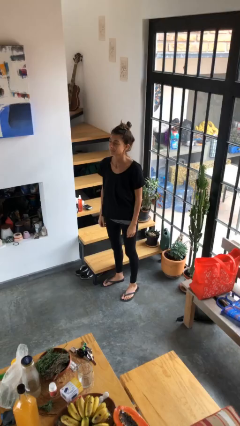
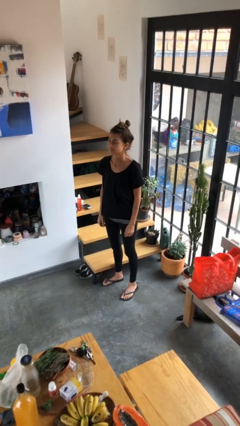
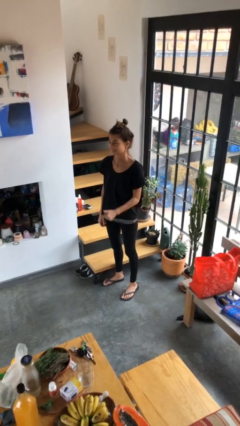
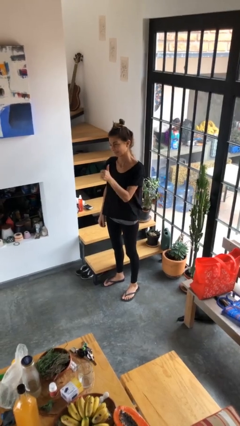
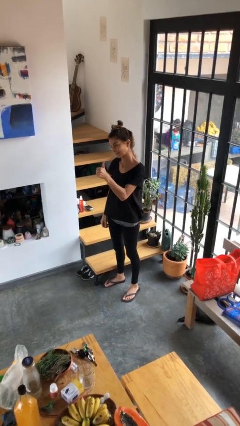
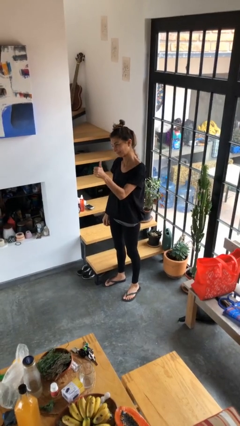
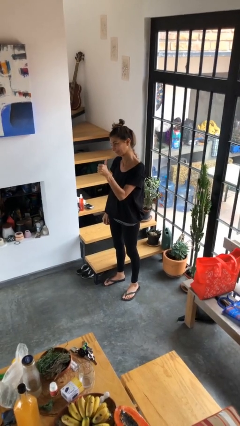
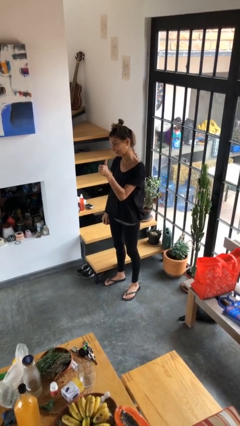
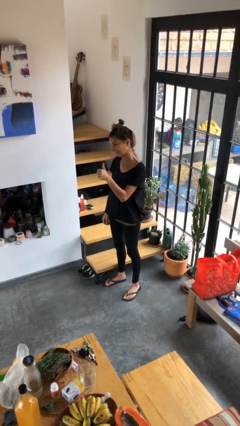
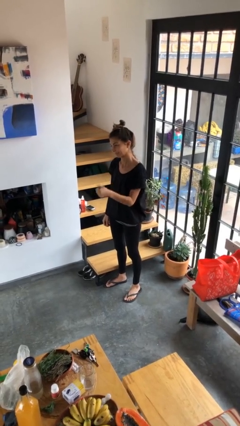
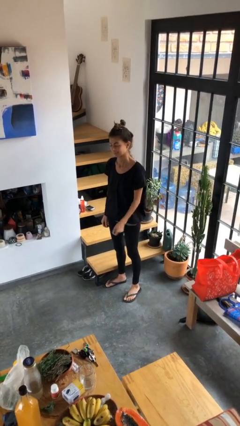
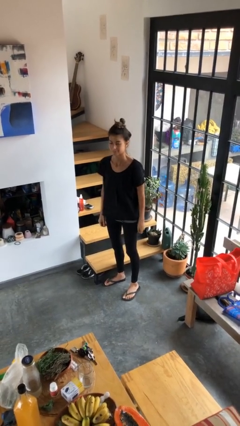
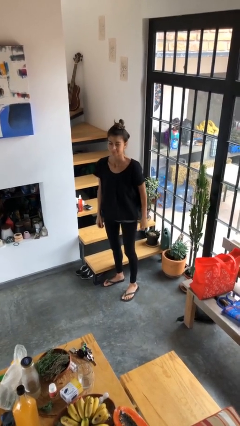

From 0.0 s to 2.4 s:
person gestures thumbs up

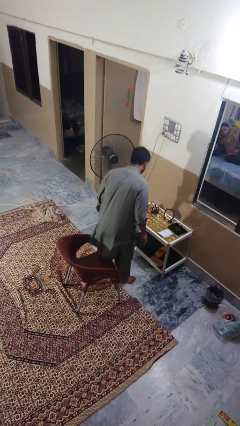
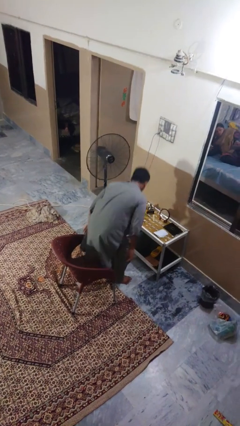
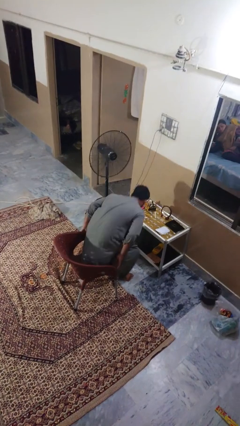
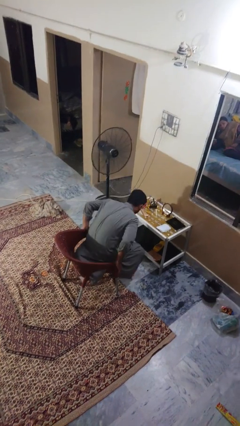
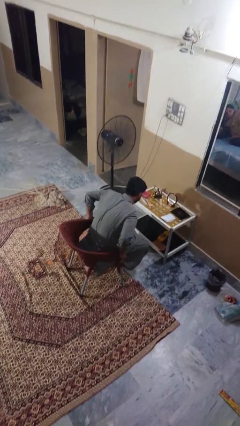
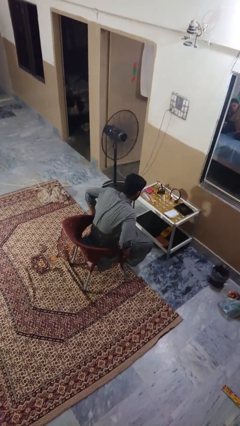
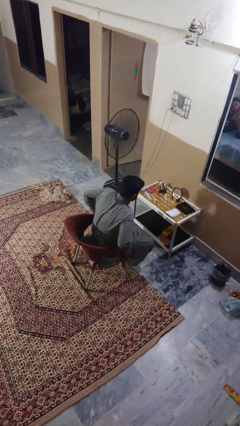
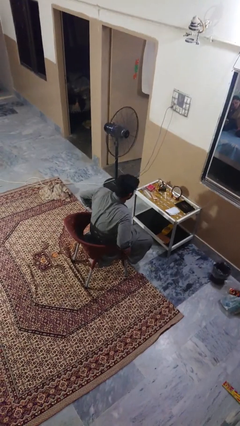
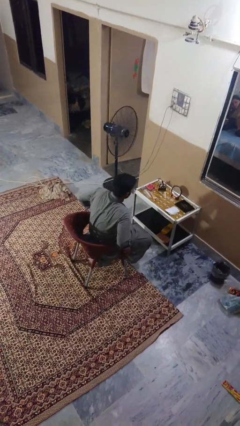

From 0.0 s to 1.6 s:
person sits down

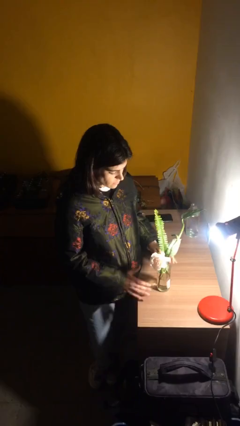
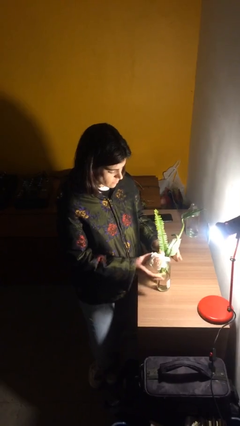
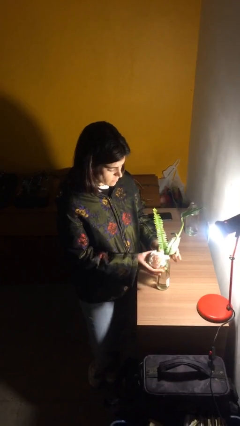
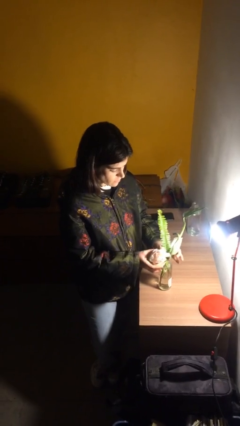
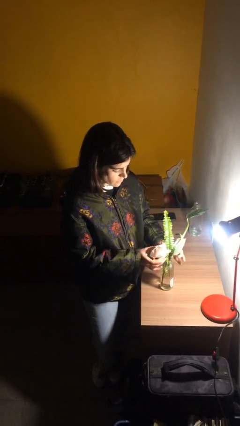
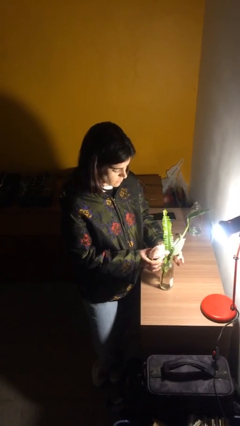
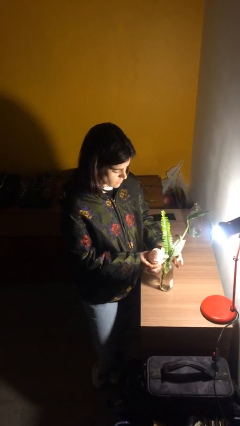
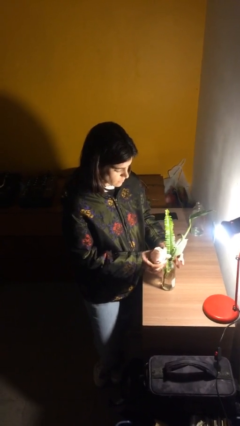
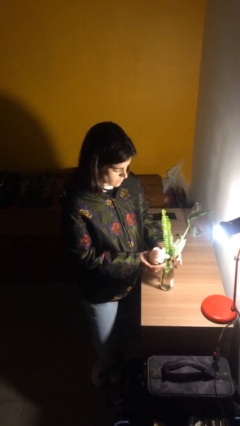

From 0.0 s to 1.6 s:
person arranges flowers in vase

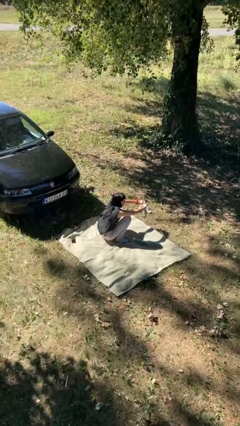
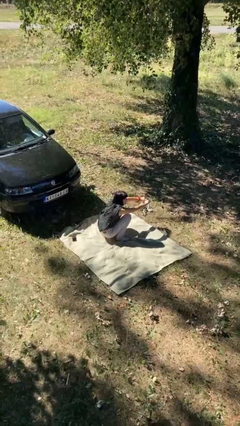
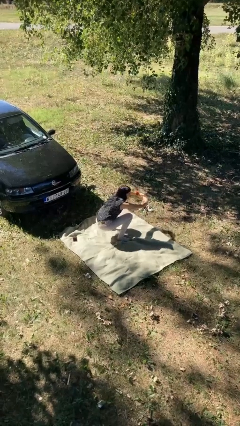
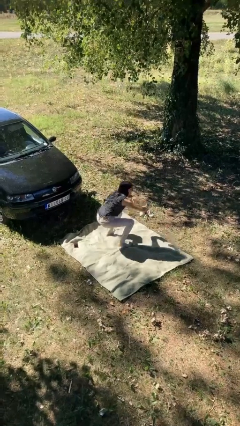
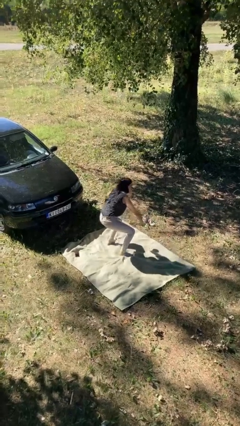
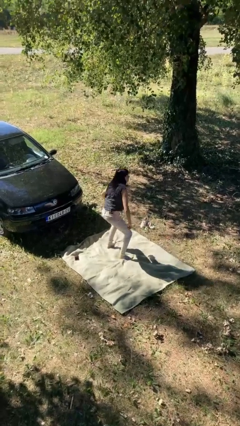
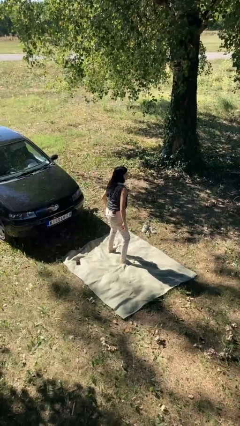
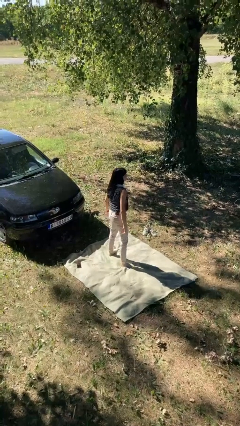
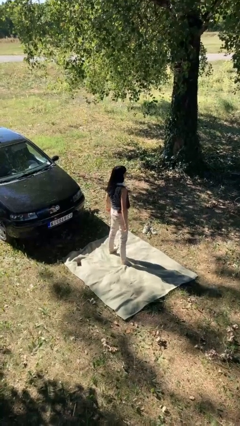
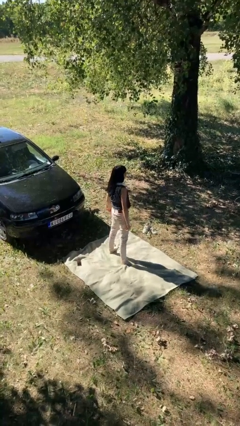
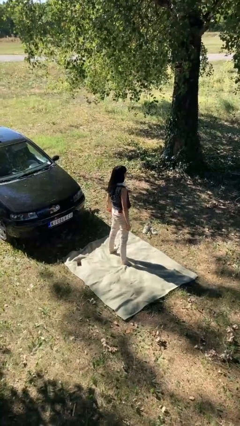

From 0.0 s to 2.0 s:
person stands up

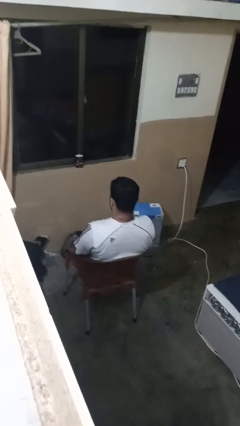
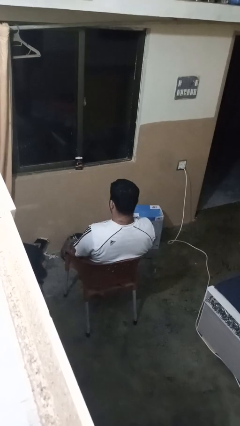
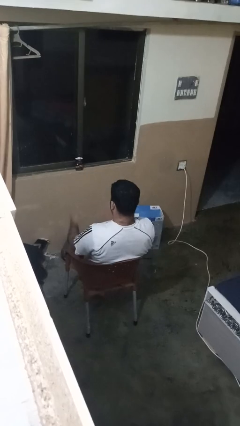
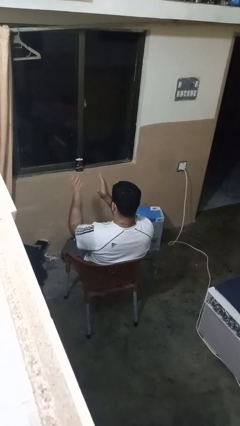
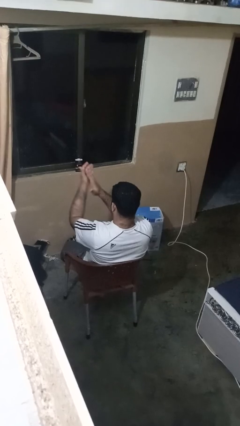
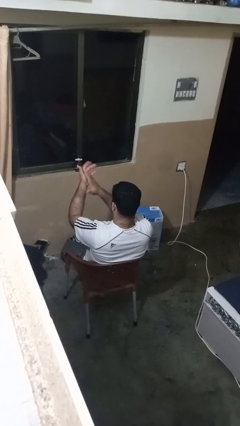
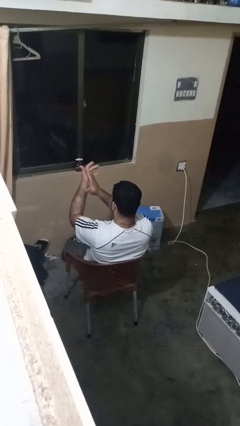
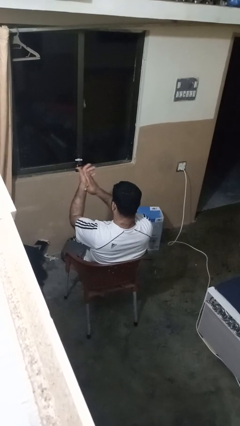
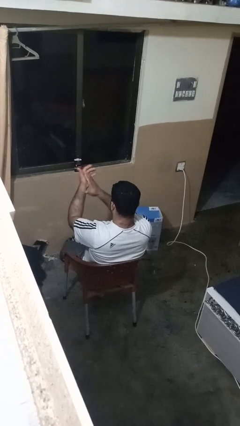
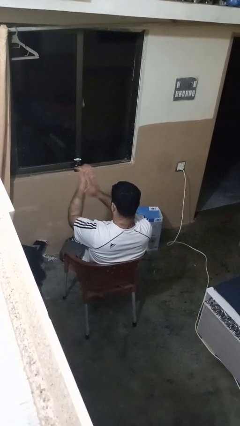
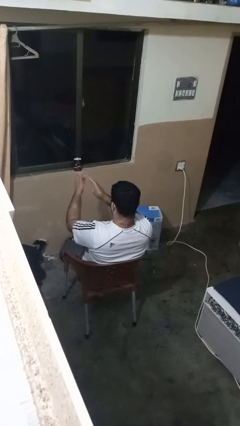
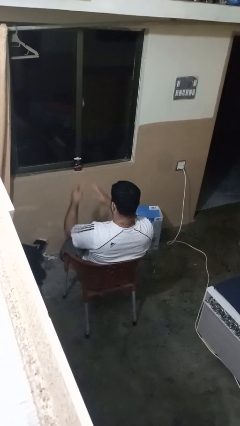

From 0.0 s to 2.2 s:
person claps hands

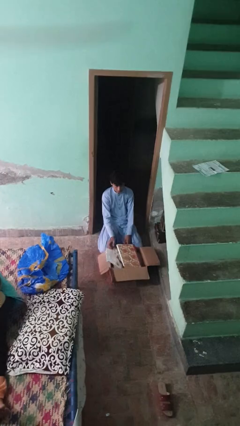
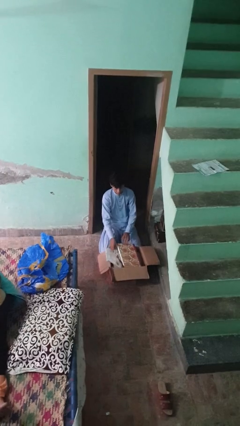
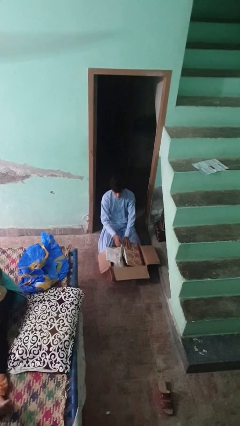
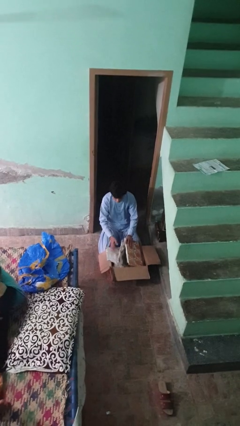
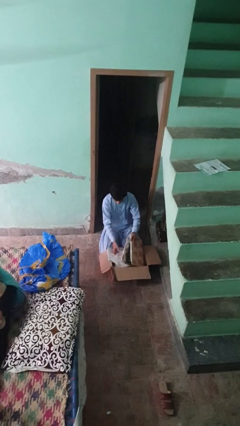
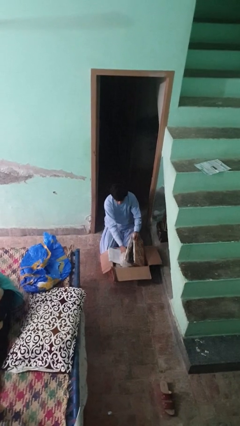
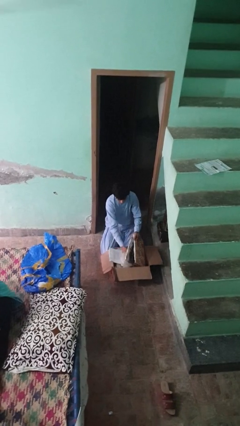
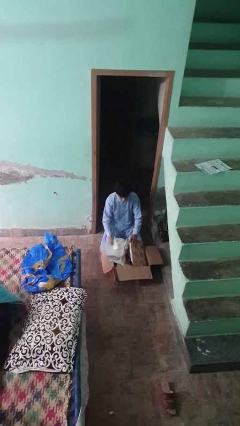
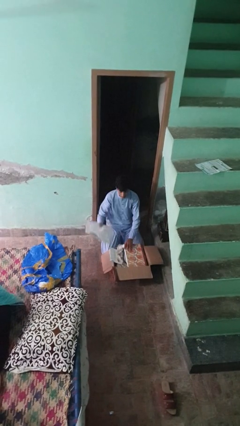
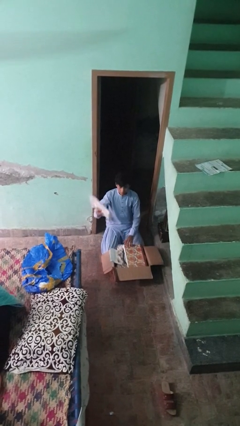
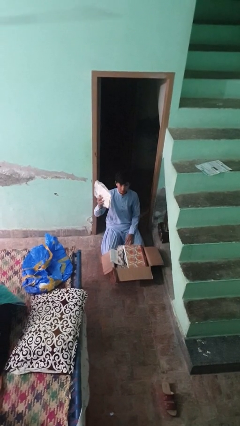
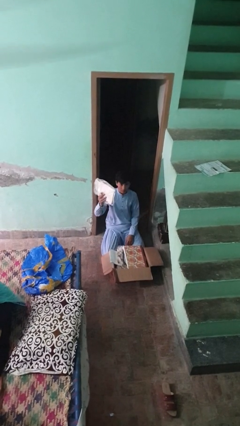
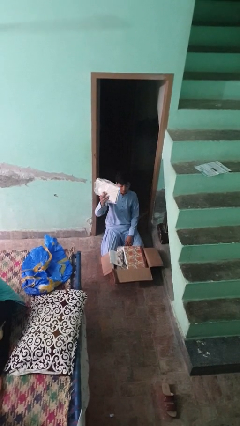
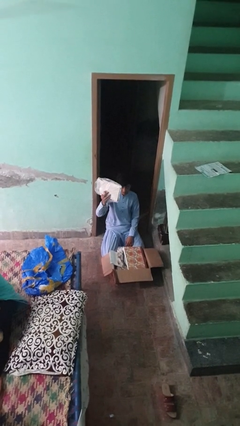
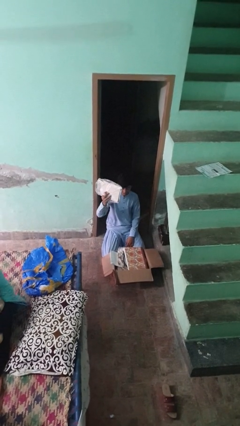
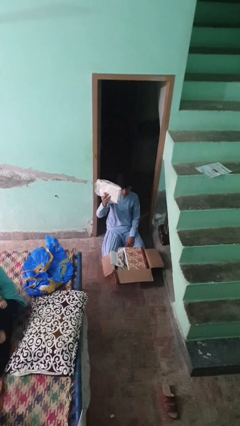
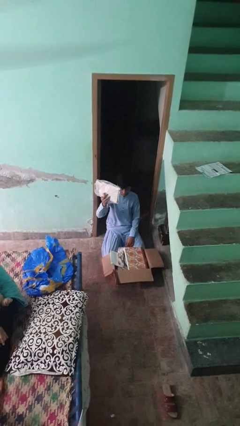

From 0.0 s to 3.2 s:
person takes object from box

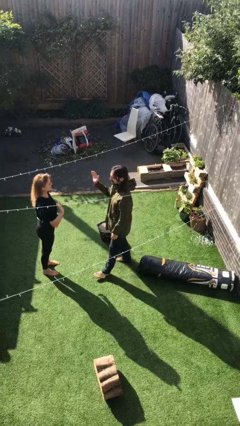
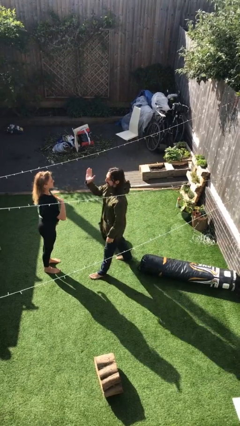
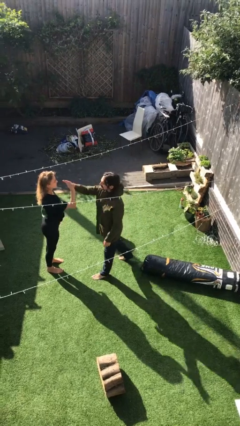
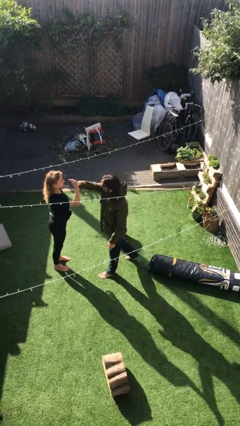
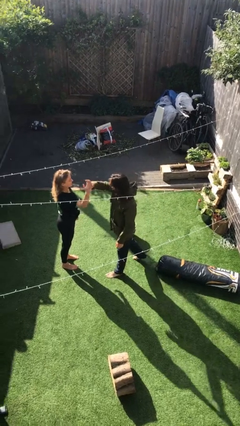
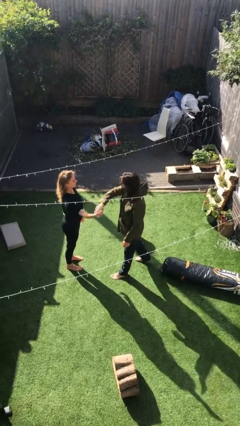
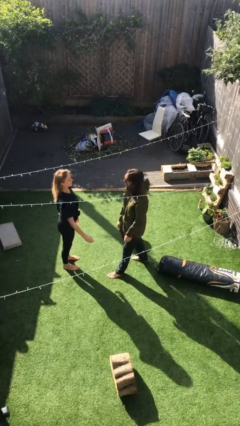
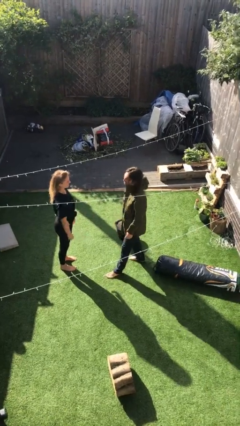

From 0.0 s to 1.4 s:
person highfives hand

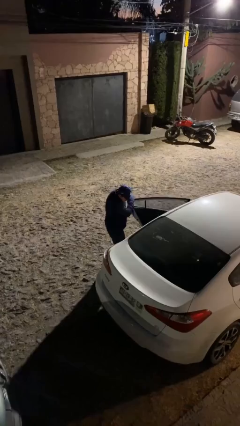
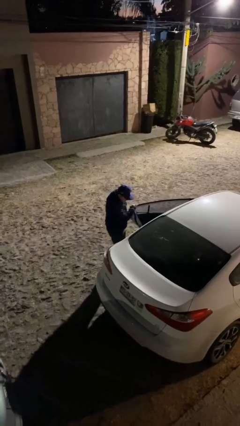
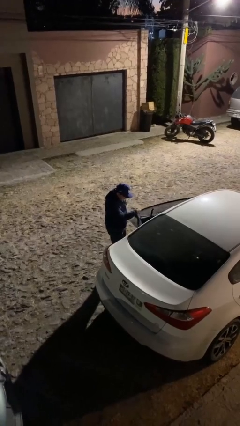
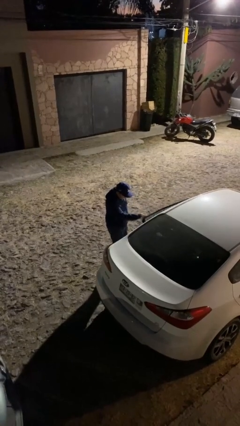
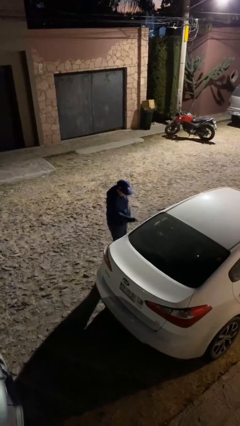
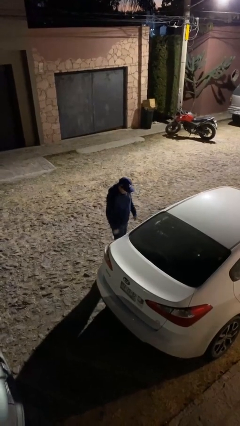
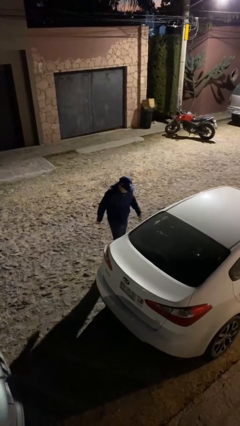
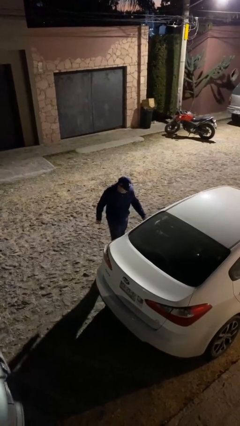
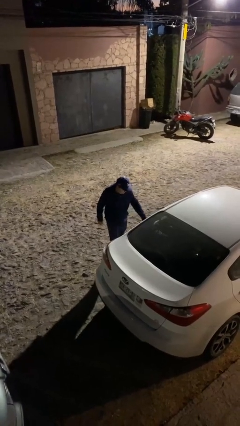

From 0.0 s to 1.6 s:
person closes car door

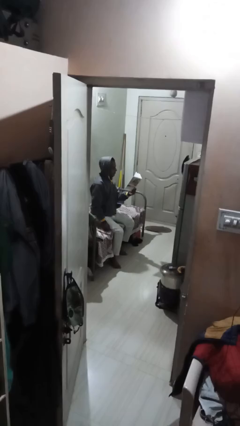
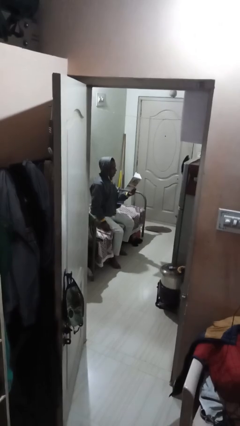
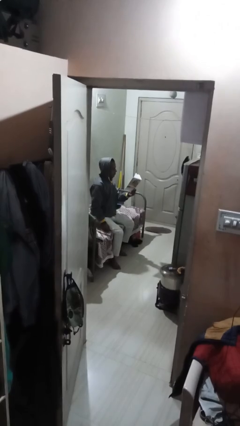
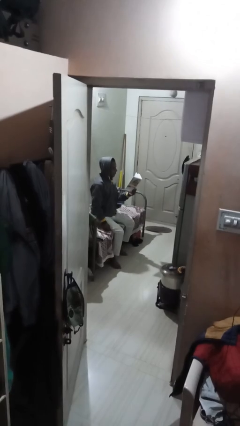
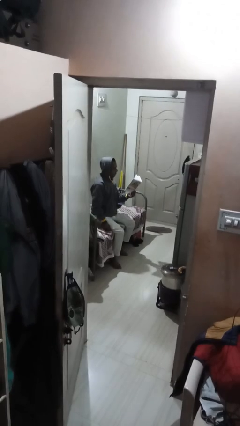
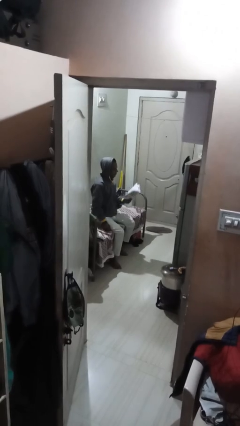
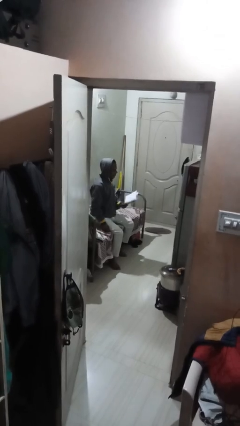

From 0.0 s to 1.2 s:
person reads document
